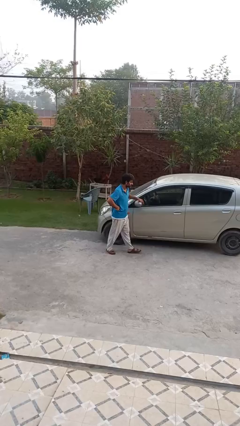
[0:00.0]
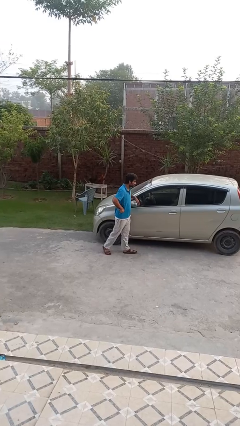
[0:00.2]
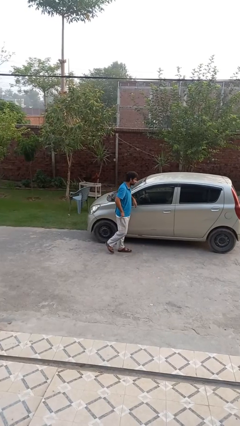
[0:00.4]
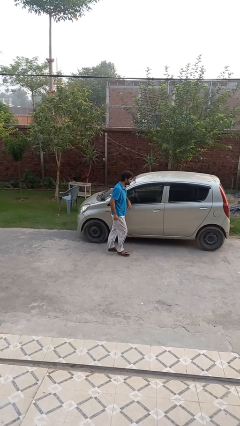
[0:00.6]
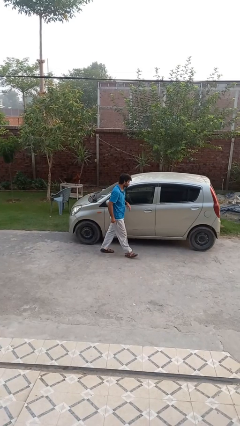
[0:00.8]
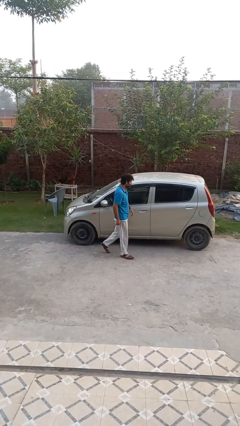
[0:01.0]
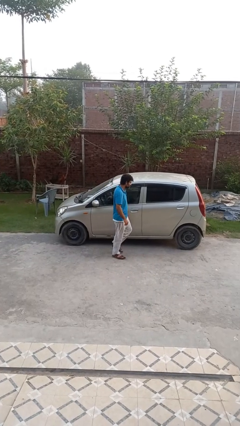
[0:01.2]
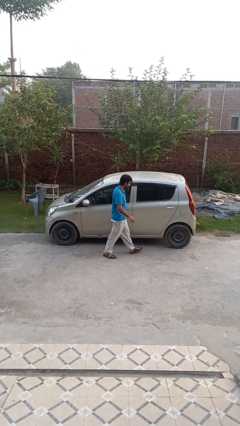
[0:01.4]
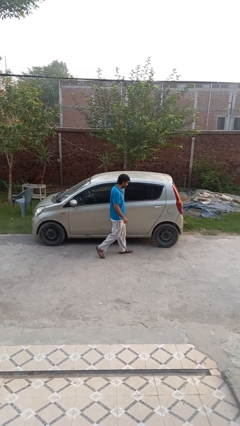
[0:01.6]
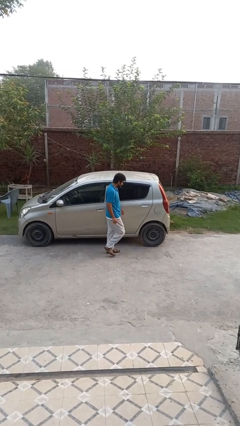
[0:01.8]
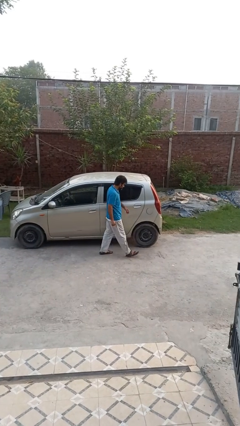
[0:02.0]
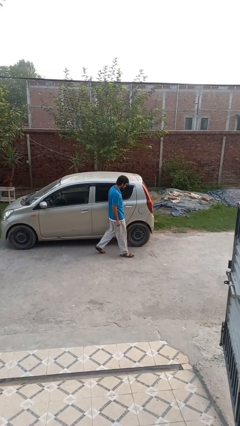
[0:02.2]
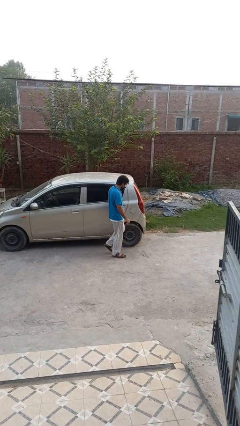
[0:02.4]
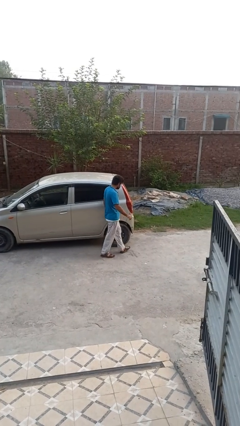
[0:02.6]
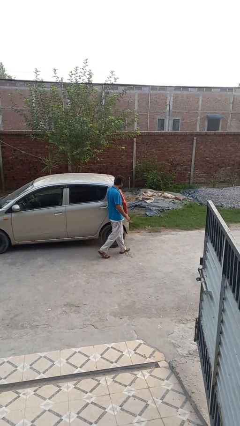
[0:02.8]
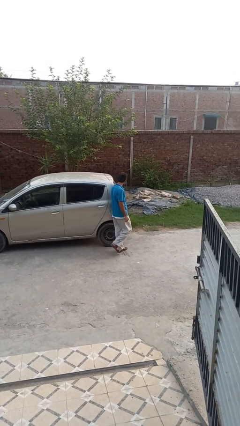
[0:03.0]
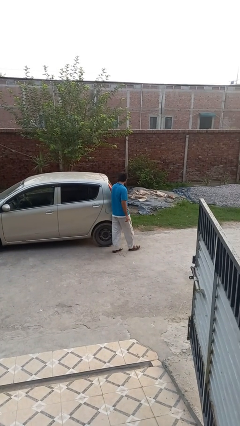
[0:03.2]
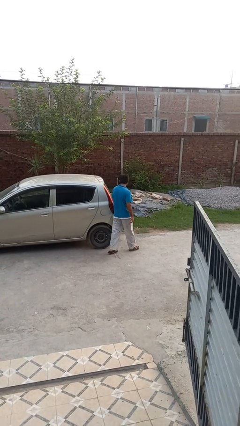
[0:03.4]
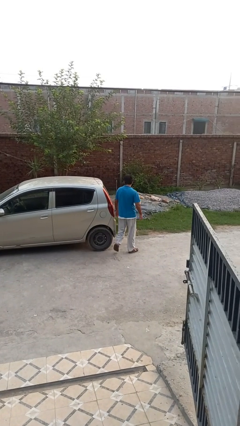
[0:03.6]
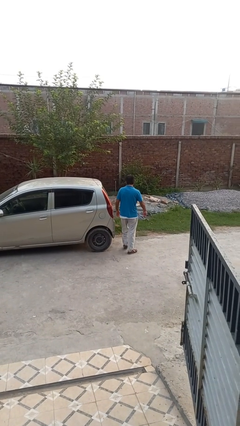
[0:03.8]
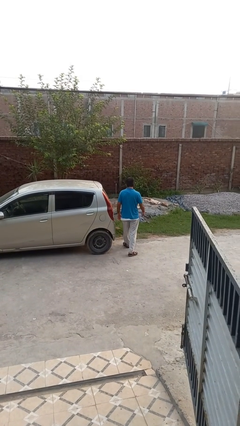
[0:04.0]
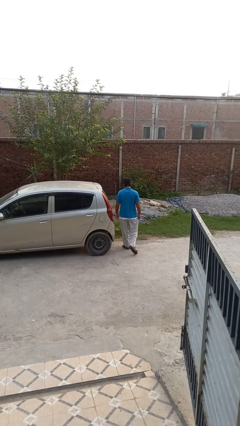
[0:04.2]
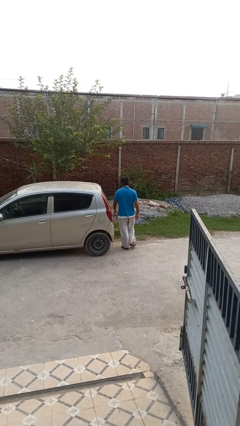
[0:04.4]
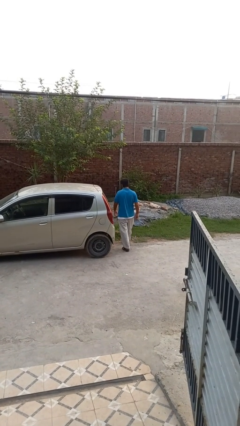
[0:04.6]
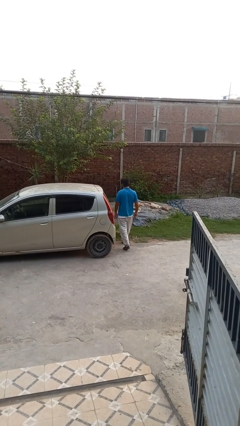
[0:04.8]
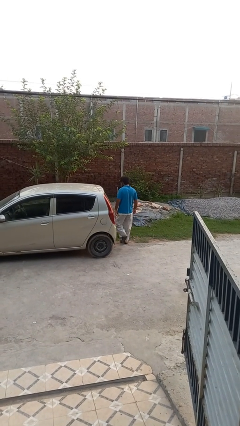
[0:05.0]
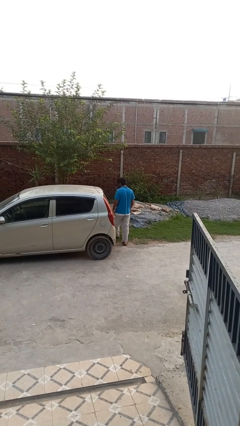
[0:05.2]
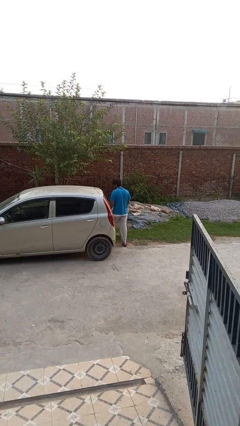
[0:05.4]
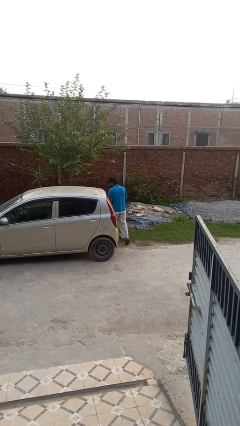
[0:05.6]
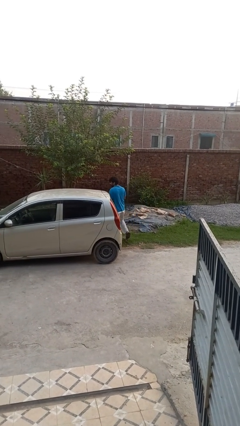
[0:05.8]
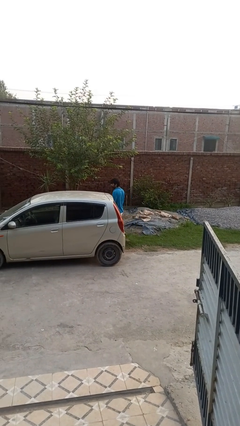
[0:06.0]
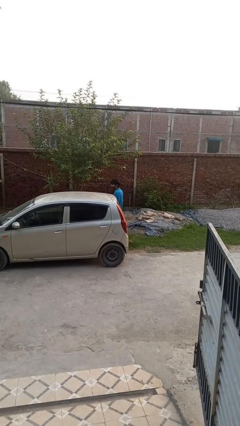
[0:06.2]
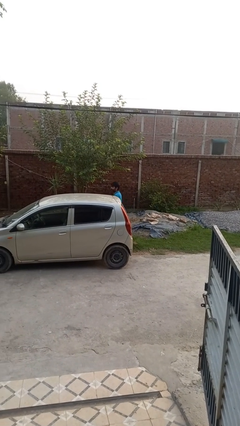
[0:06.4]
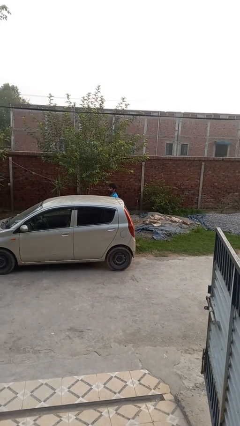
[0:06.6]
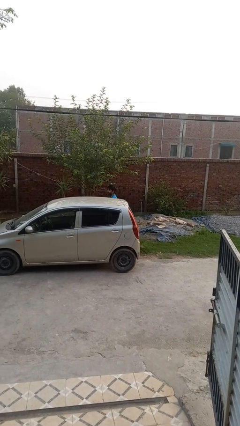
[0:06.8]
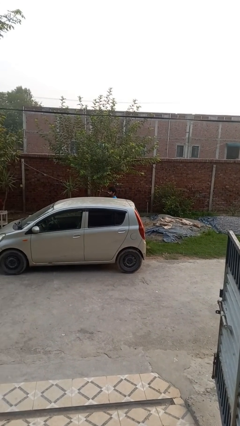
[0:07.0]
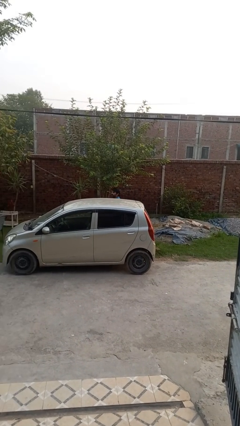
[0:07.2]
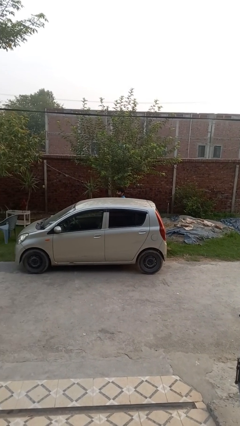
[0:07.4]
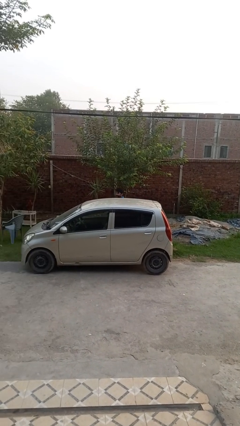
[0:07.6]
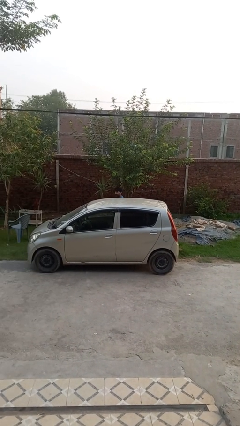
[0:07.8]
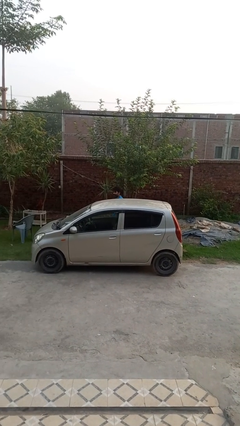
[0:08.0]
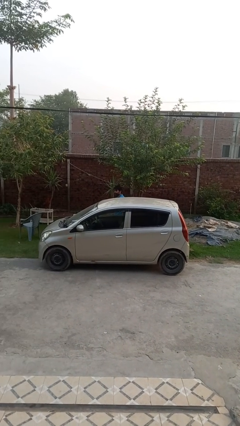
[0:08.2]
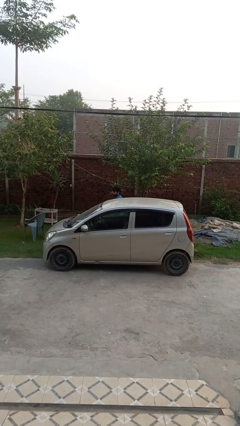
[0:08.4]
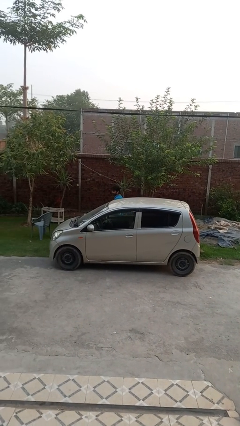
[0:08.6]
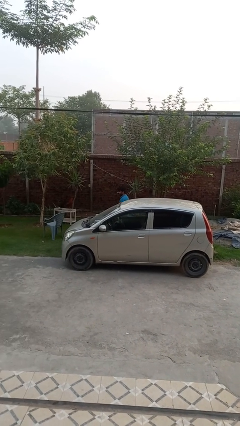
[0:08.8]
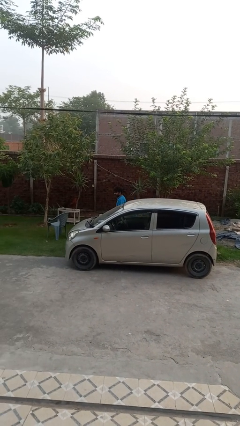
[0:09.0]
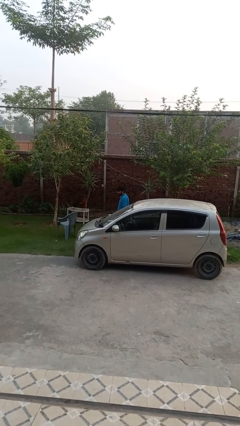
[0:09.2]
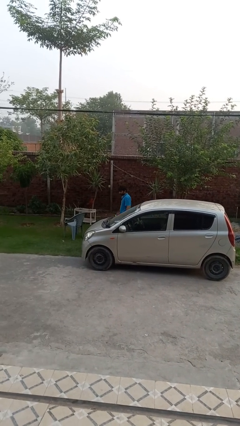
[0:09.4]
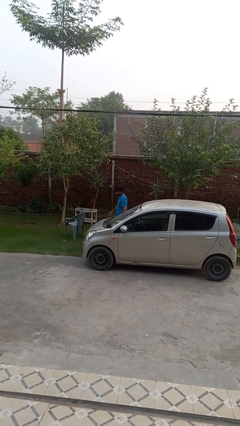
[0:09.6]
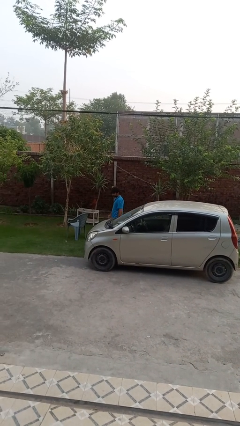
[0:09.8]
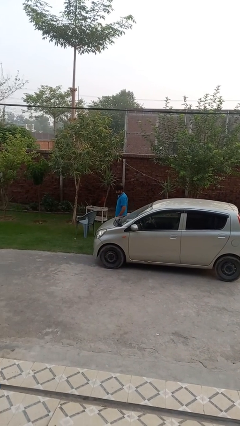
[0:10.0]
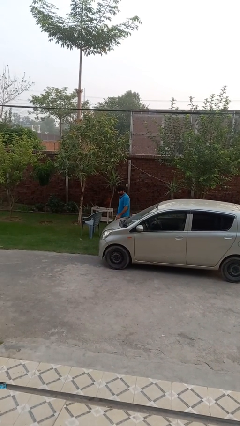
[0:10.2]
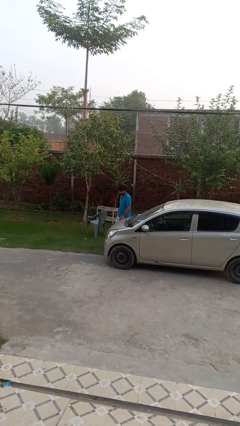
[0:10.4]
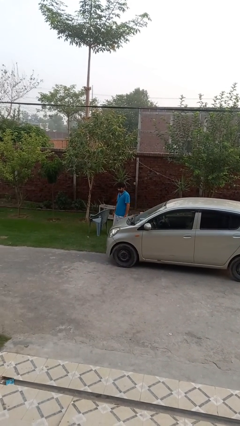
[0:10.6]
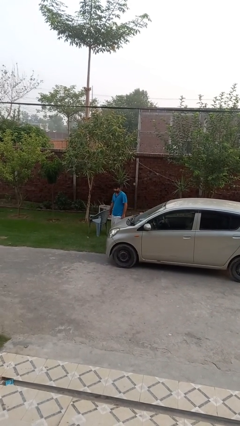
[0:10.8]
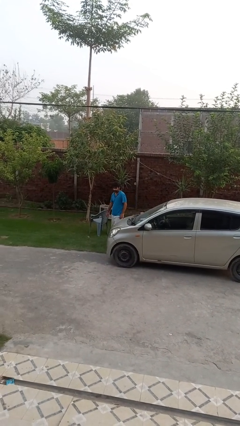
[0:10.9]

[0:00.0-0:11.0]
person walks around car

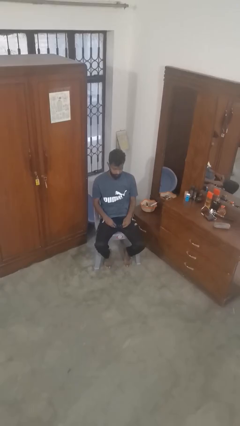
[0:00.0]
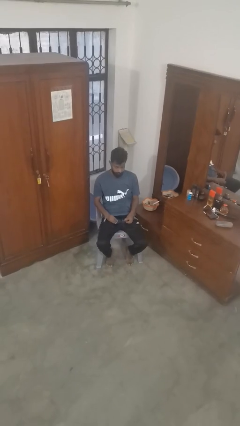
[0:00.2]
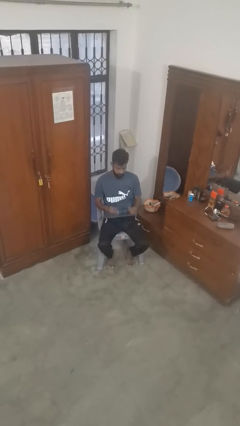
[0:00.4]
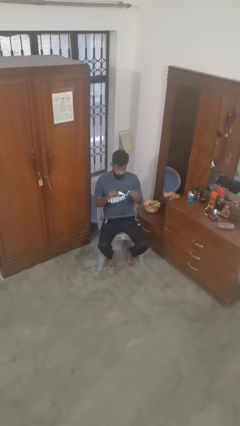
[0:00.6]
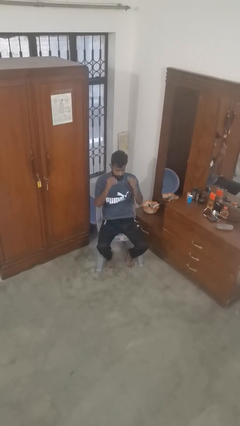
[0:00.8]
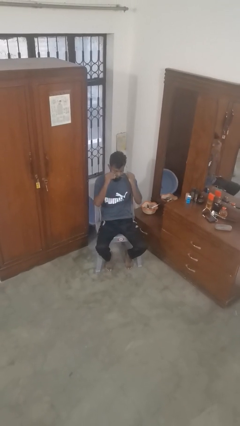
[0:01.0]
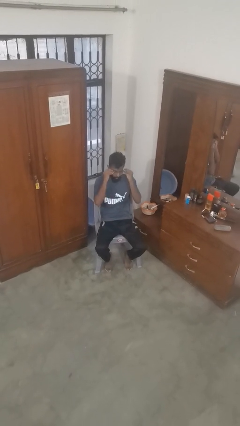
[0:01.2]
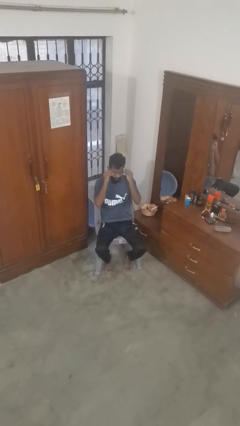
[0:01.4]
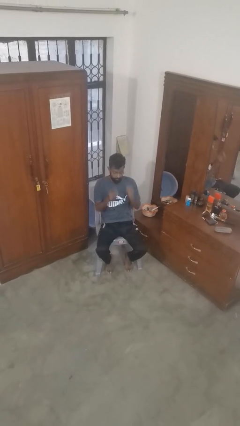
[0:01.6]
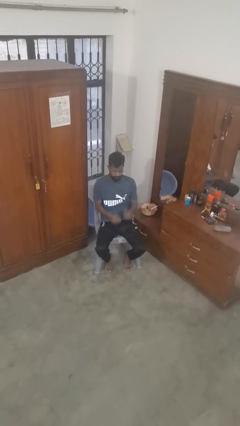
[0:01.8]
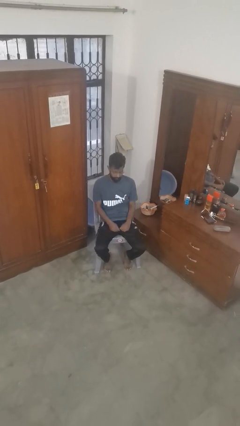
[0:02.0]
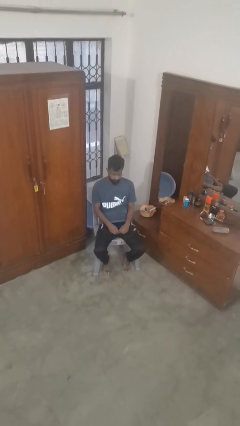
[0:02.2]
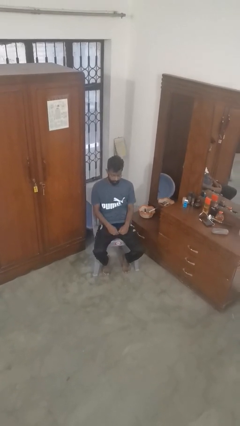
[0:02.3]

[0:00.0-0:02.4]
person puts on glasses

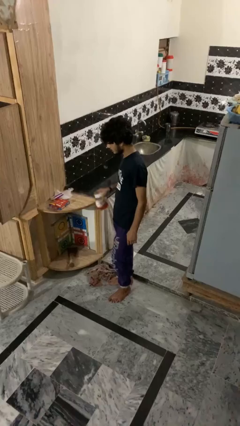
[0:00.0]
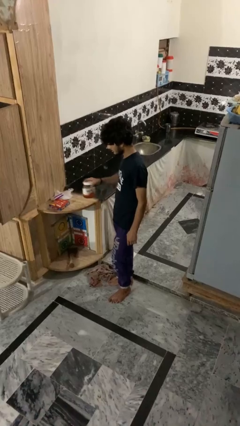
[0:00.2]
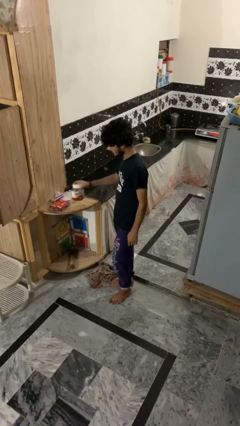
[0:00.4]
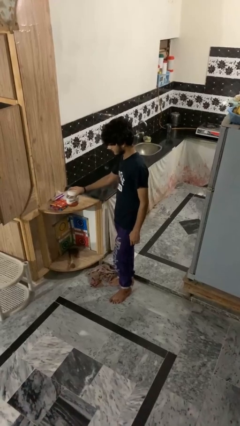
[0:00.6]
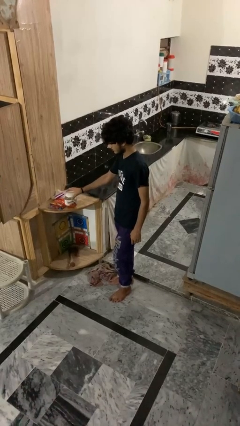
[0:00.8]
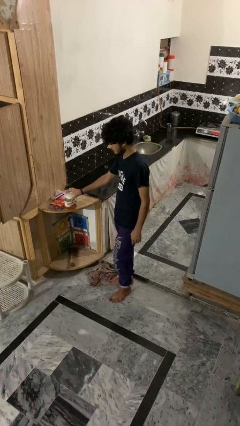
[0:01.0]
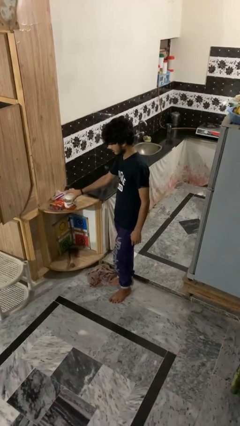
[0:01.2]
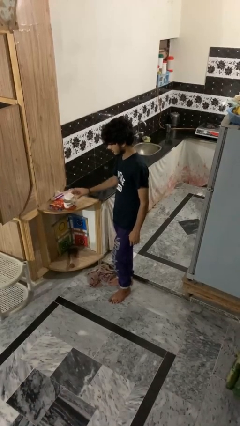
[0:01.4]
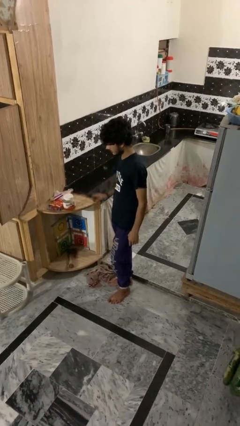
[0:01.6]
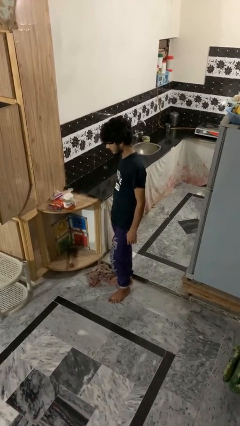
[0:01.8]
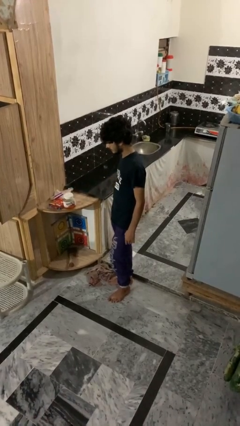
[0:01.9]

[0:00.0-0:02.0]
person puts down object on countertop

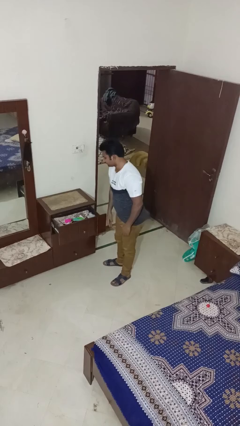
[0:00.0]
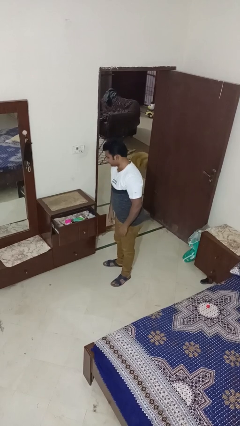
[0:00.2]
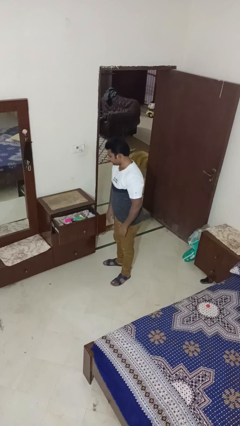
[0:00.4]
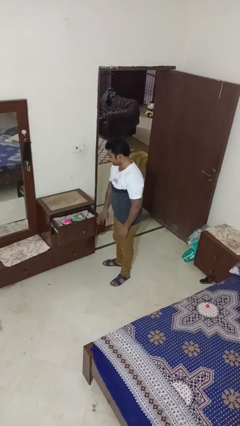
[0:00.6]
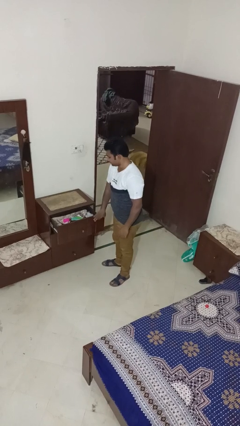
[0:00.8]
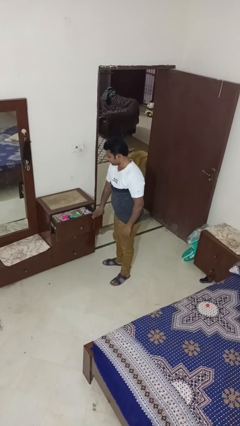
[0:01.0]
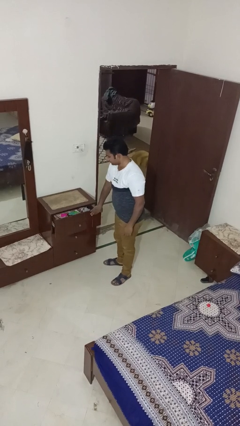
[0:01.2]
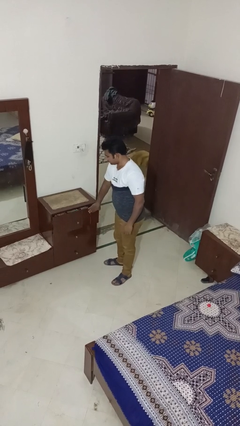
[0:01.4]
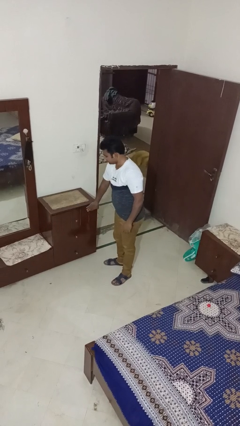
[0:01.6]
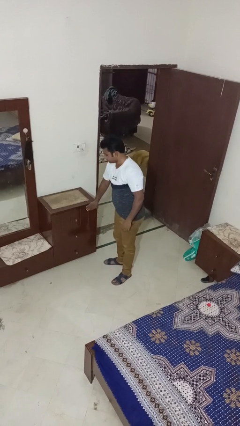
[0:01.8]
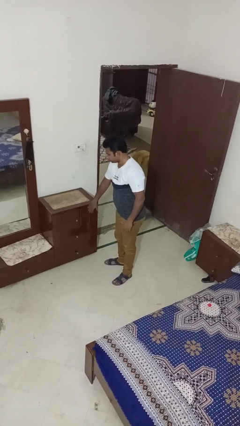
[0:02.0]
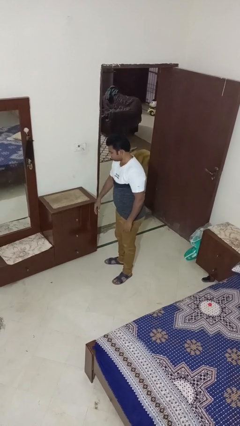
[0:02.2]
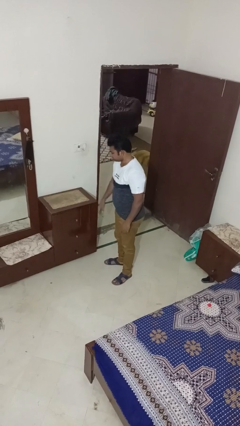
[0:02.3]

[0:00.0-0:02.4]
person closes dresser drawer
